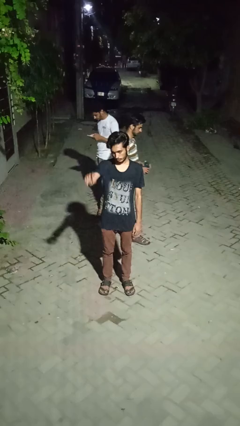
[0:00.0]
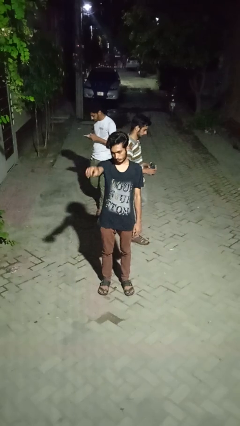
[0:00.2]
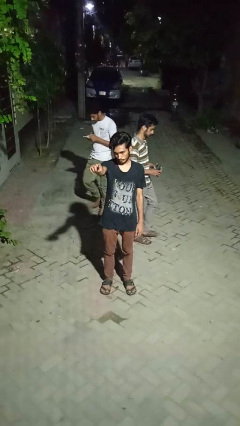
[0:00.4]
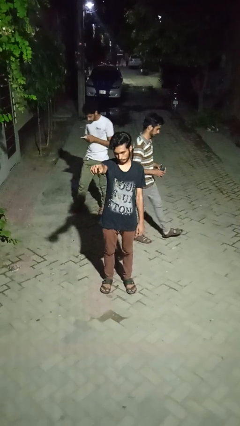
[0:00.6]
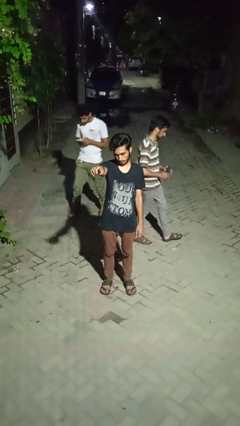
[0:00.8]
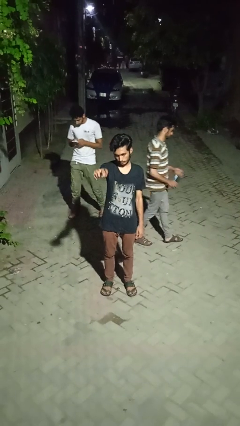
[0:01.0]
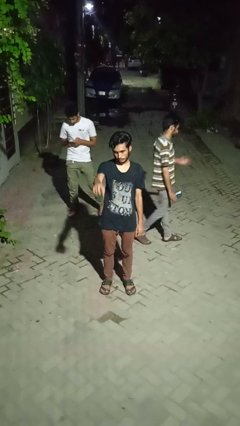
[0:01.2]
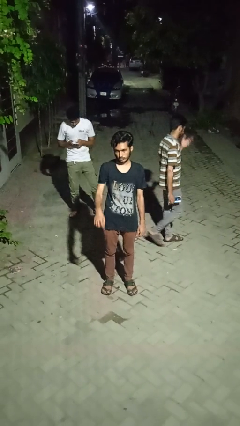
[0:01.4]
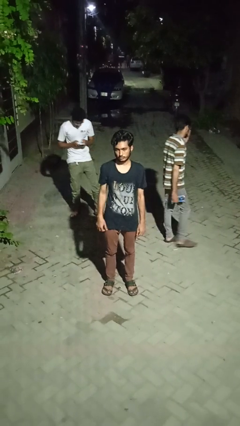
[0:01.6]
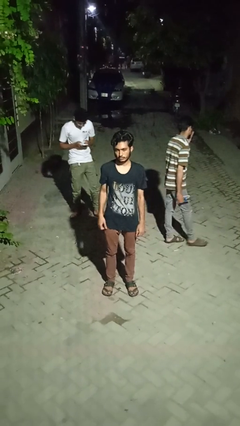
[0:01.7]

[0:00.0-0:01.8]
person points at person

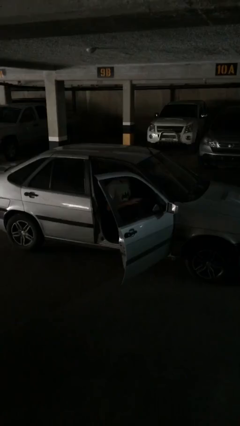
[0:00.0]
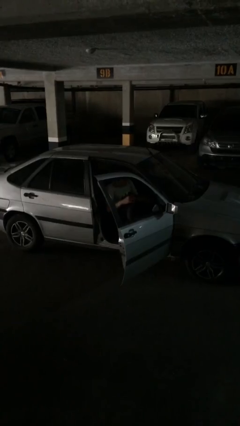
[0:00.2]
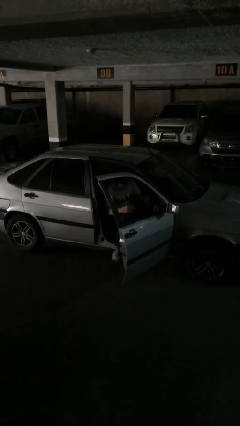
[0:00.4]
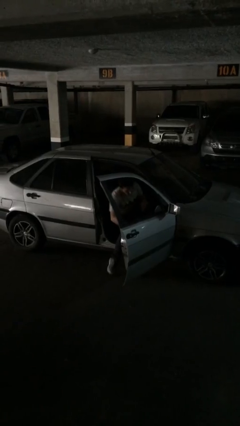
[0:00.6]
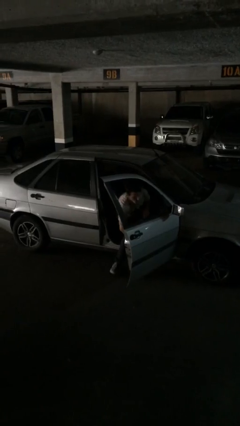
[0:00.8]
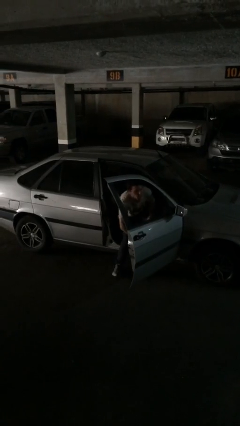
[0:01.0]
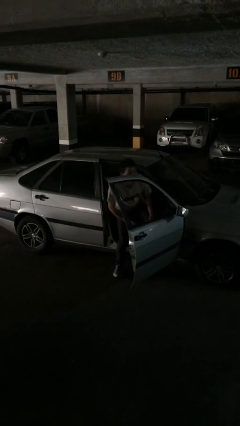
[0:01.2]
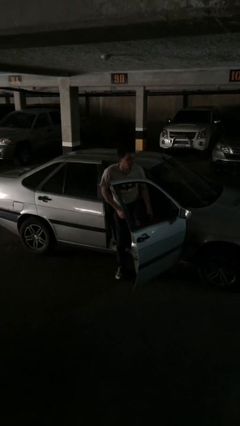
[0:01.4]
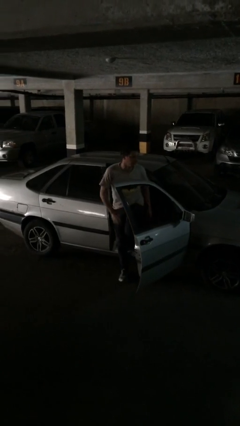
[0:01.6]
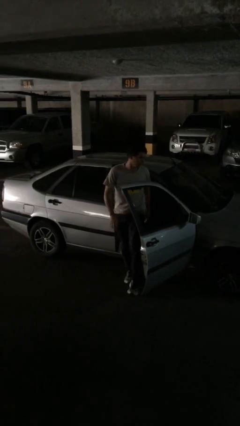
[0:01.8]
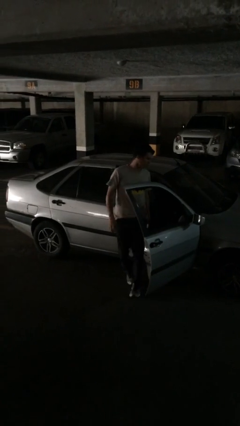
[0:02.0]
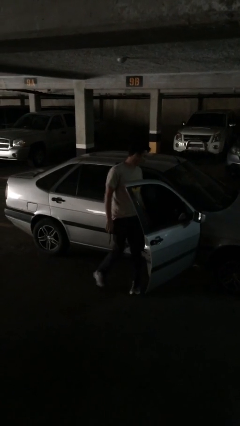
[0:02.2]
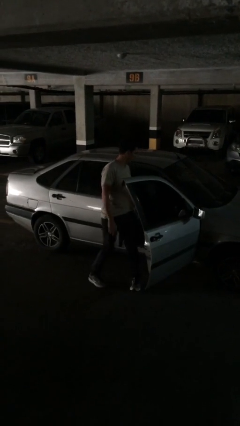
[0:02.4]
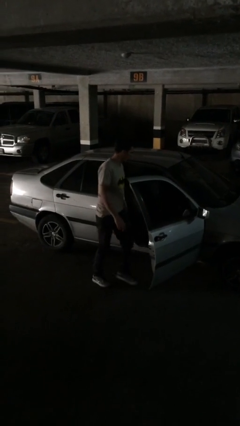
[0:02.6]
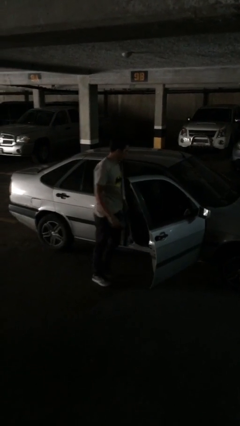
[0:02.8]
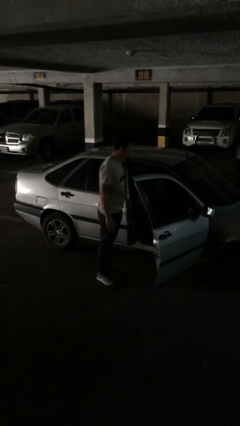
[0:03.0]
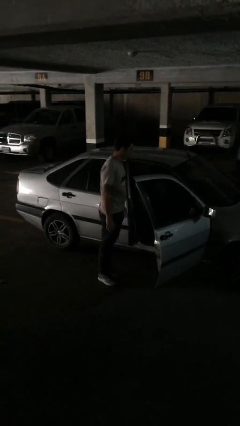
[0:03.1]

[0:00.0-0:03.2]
person exits car

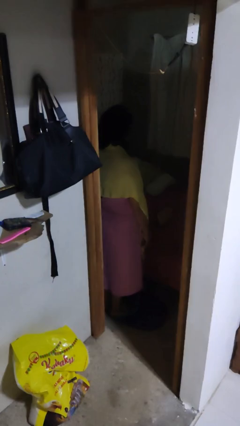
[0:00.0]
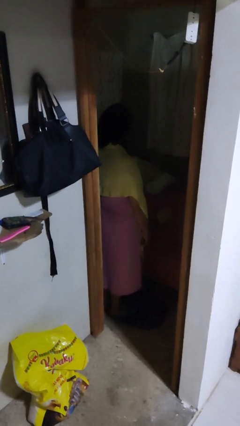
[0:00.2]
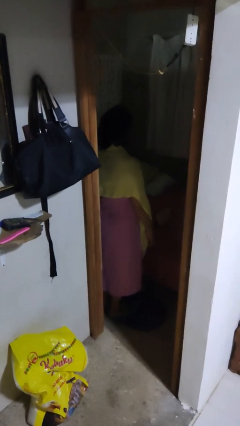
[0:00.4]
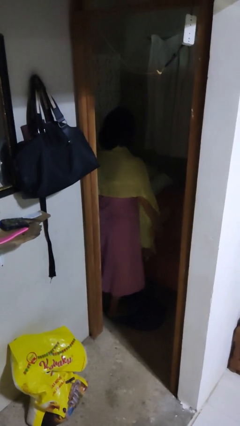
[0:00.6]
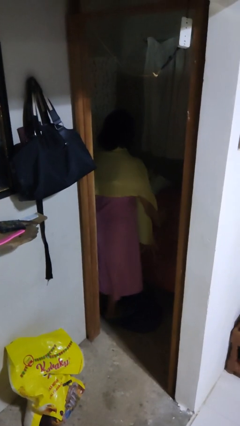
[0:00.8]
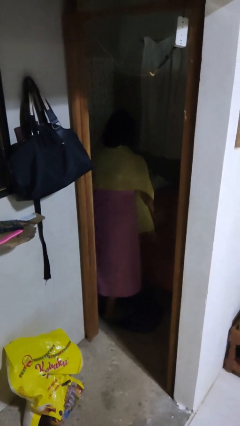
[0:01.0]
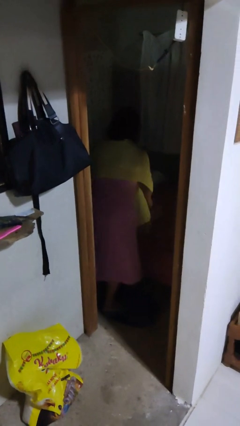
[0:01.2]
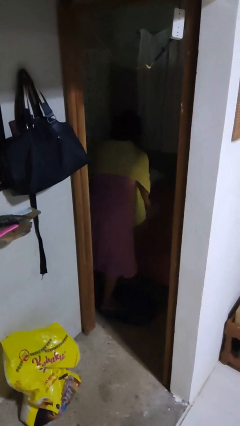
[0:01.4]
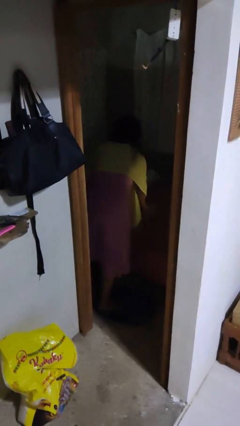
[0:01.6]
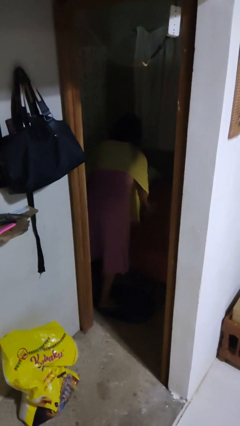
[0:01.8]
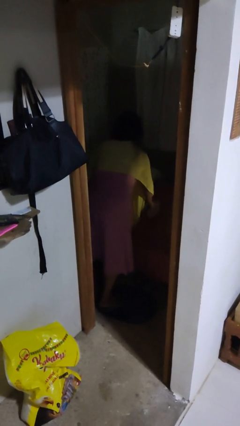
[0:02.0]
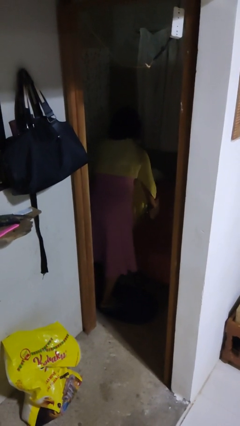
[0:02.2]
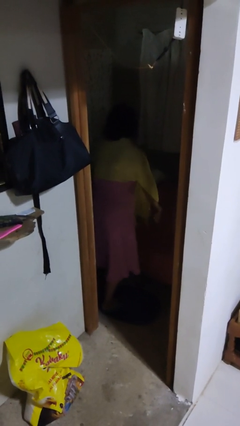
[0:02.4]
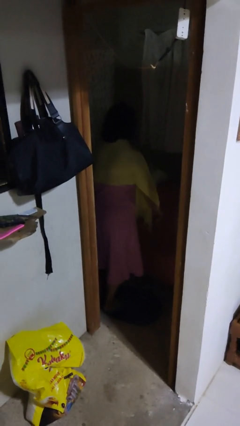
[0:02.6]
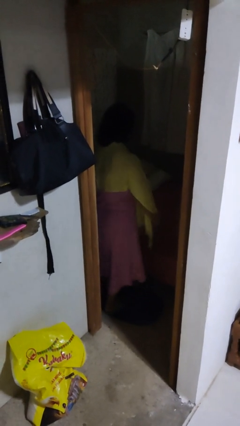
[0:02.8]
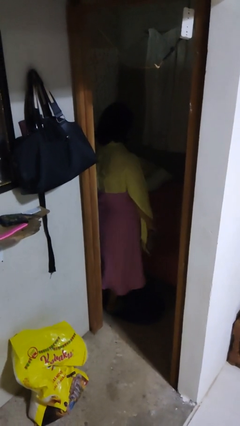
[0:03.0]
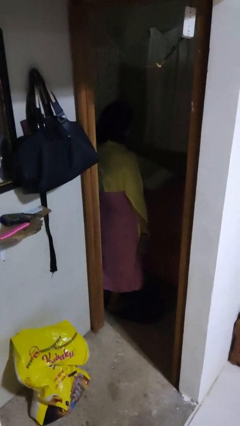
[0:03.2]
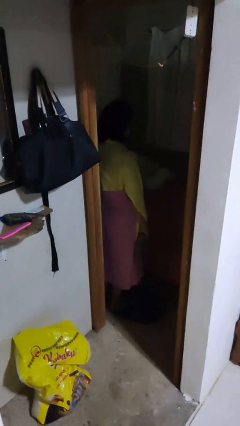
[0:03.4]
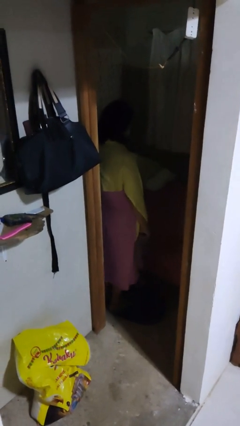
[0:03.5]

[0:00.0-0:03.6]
person picks up object from bed

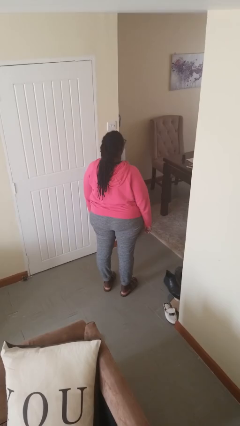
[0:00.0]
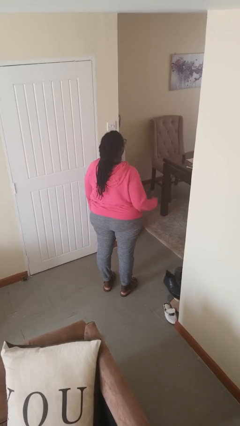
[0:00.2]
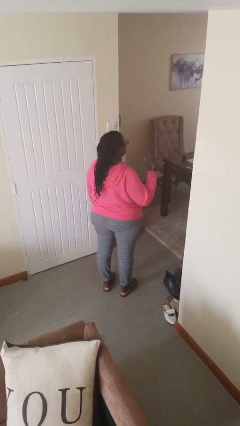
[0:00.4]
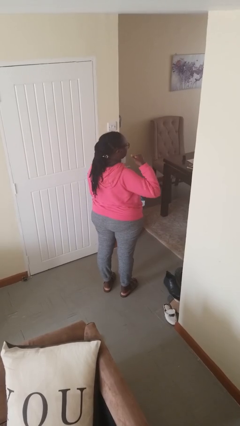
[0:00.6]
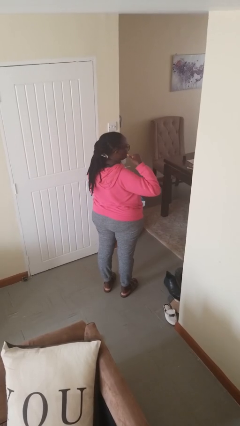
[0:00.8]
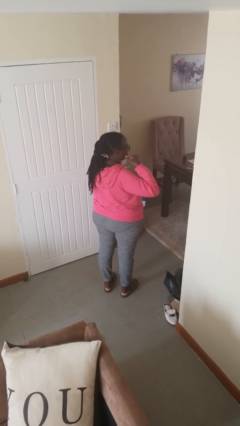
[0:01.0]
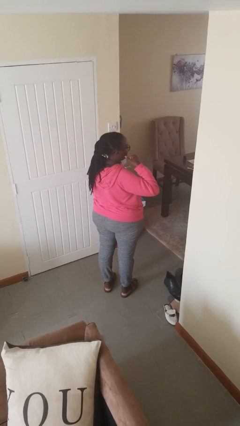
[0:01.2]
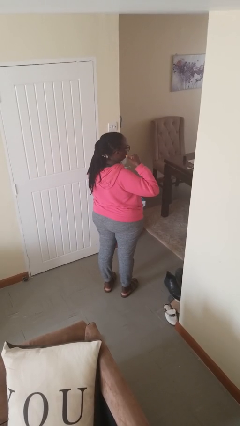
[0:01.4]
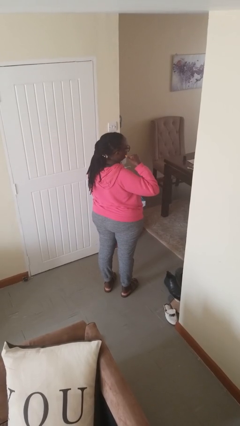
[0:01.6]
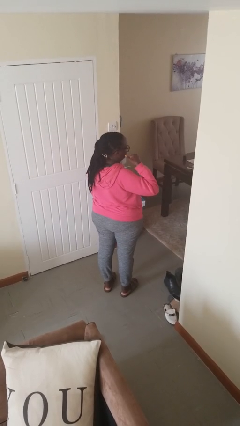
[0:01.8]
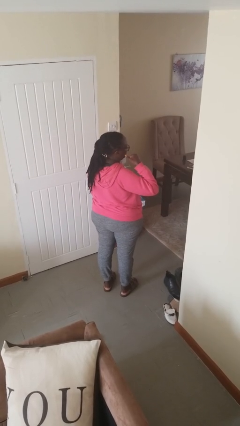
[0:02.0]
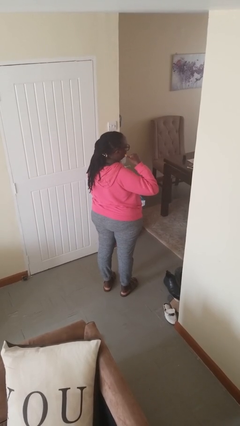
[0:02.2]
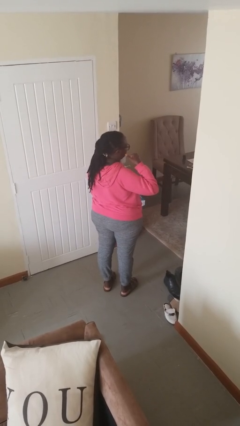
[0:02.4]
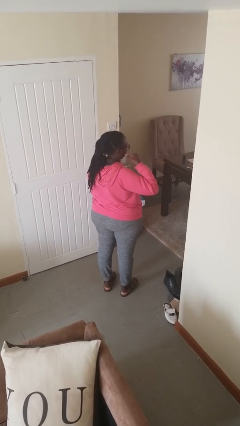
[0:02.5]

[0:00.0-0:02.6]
person gestures call me

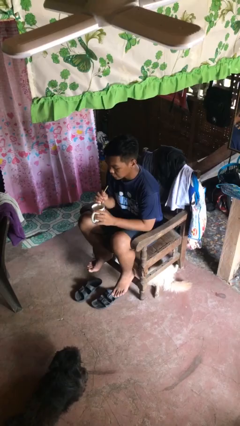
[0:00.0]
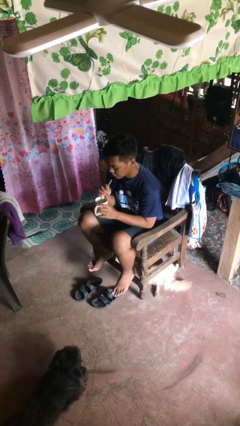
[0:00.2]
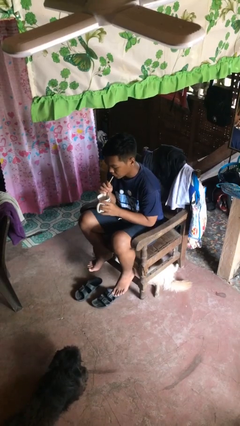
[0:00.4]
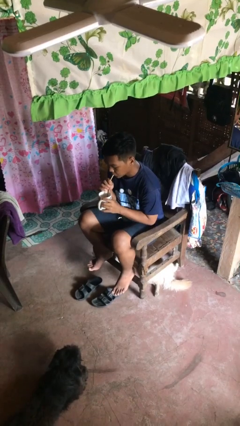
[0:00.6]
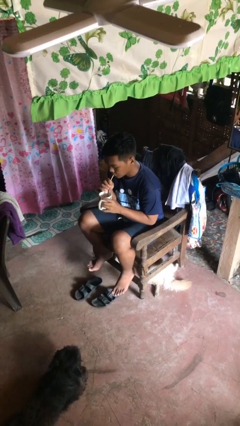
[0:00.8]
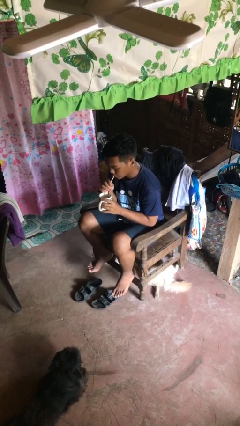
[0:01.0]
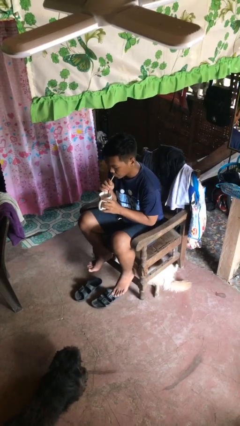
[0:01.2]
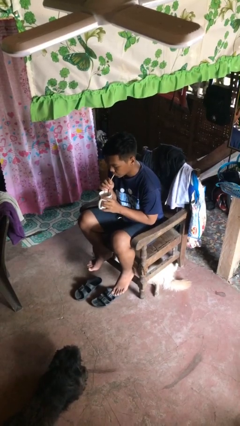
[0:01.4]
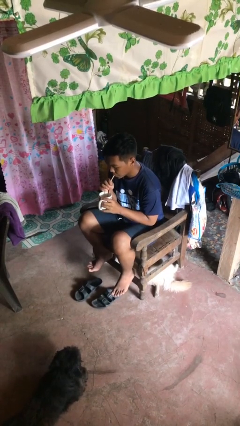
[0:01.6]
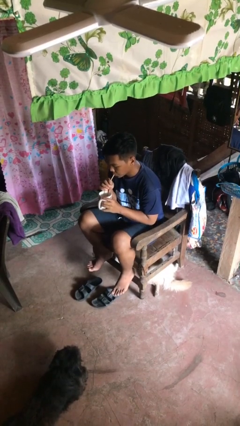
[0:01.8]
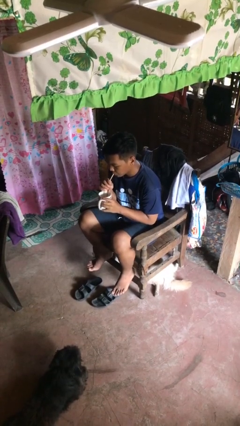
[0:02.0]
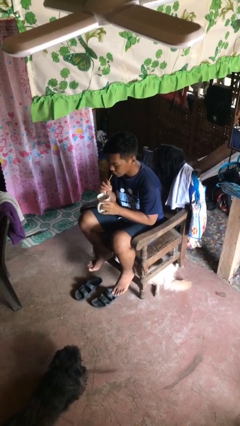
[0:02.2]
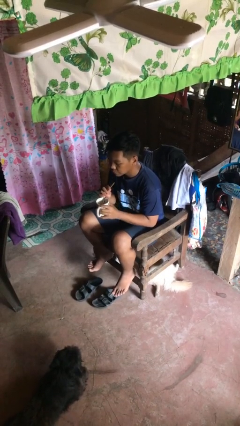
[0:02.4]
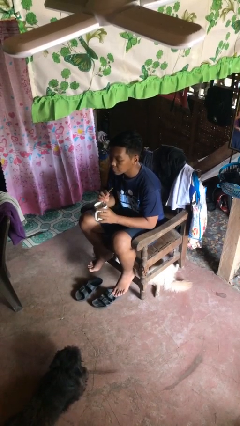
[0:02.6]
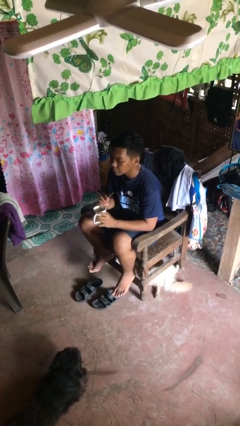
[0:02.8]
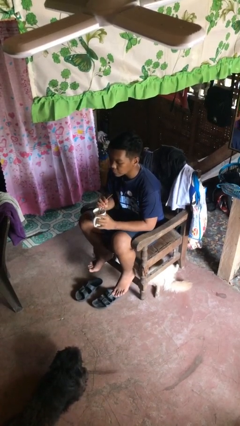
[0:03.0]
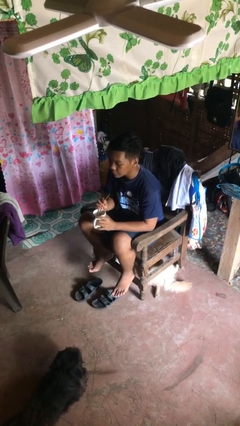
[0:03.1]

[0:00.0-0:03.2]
person drinks from straw

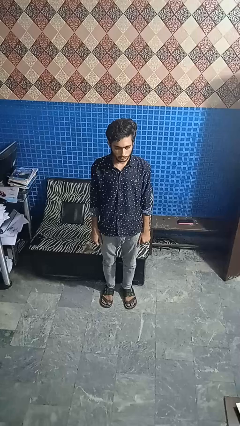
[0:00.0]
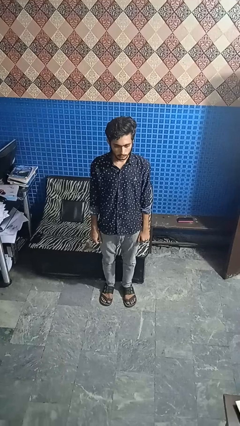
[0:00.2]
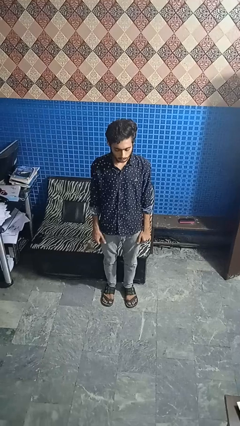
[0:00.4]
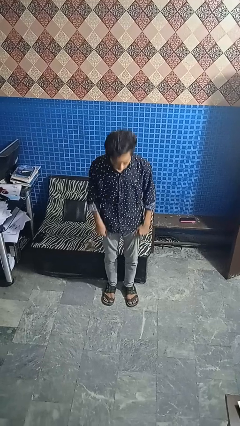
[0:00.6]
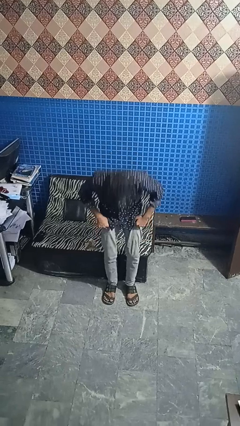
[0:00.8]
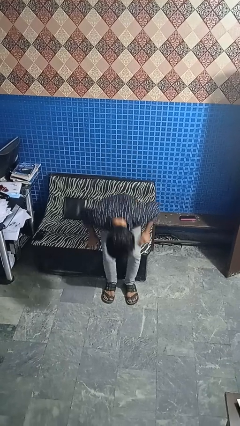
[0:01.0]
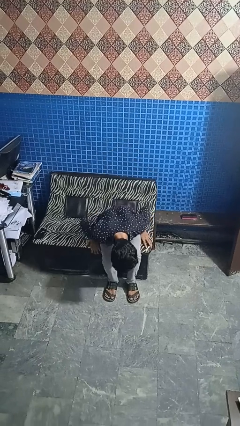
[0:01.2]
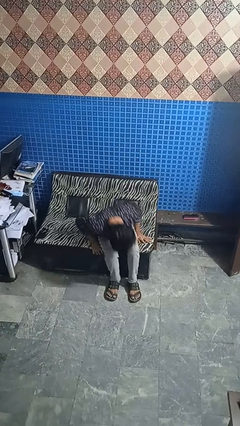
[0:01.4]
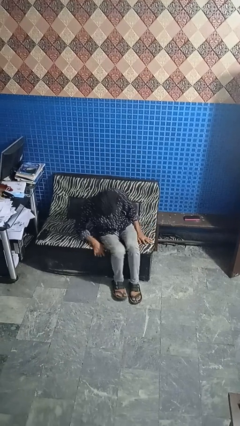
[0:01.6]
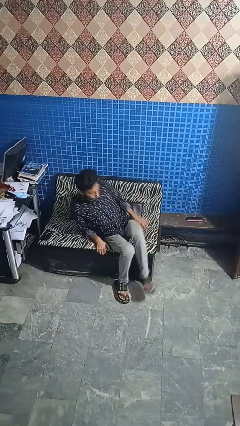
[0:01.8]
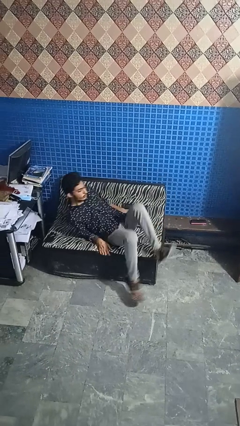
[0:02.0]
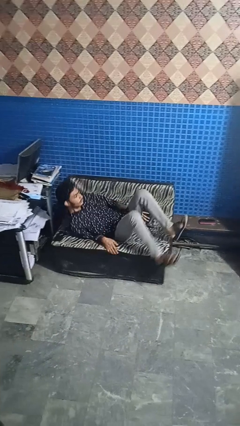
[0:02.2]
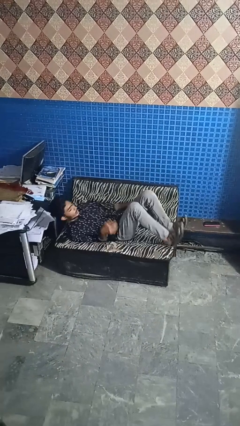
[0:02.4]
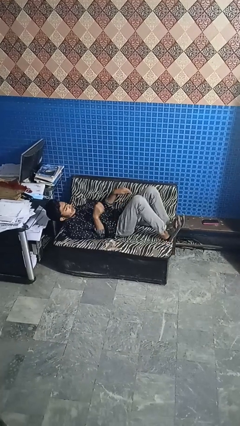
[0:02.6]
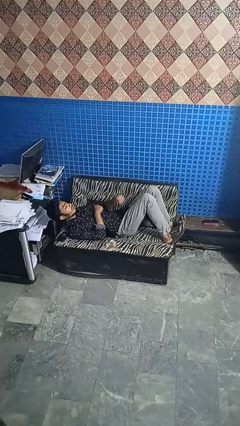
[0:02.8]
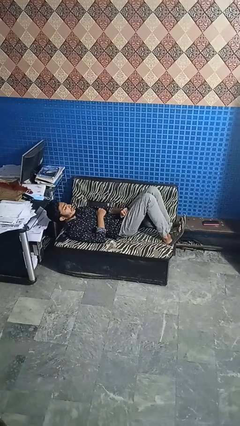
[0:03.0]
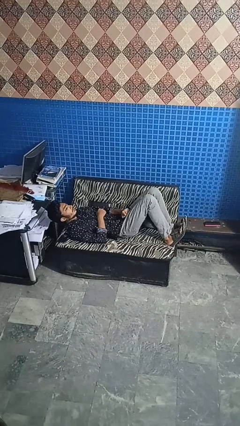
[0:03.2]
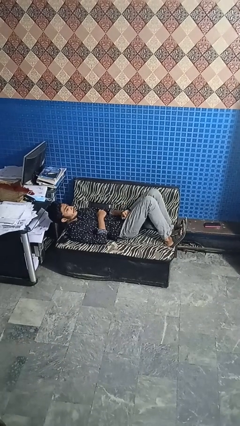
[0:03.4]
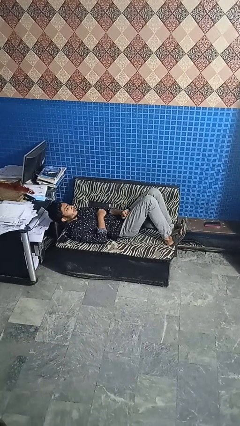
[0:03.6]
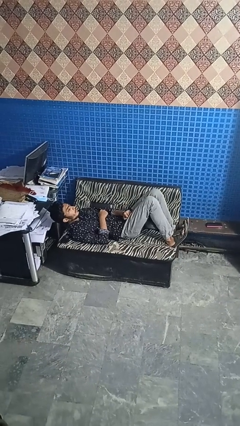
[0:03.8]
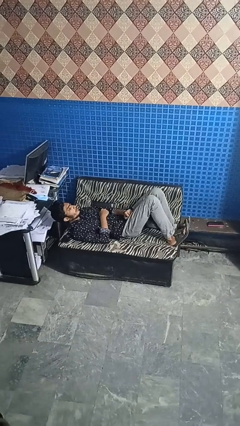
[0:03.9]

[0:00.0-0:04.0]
person lies down on couch
